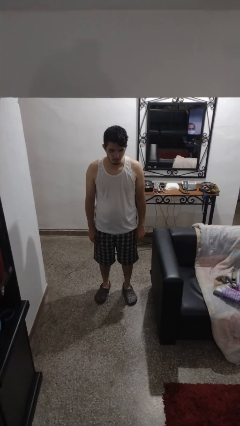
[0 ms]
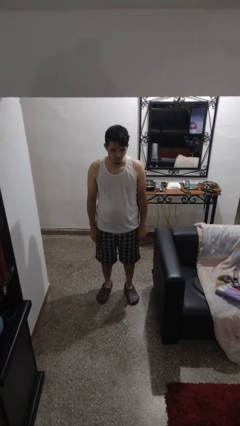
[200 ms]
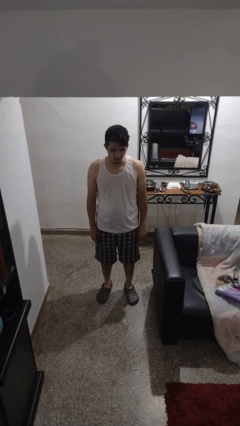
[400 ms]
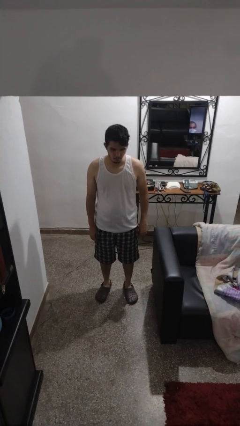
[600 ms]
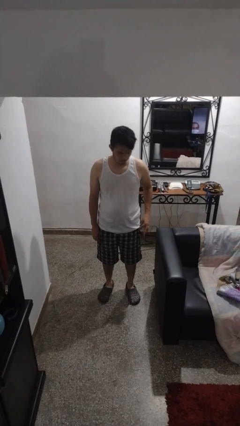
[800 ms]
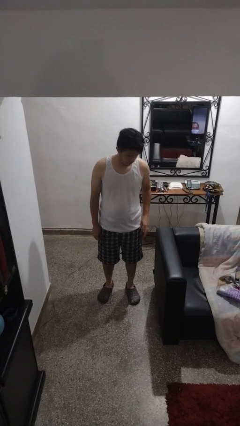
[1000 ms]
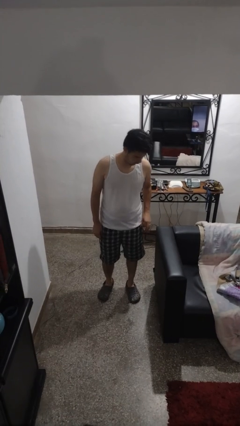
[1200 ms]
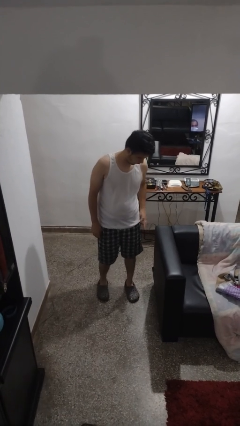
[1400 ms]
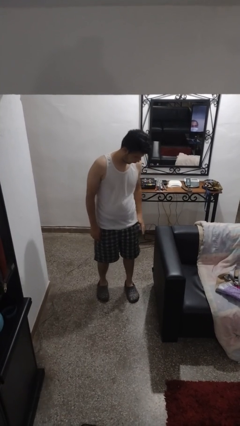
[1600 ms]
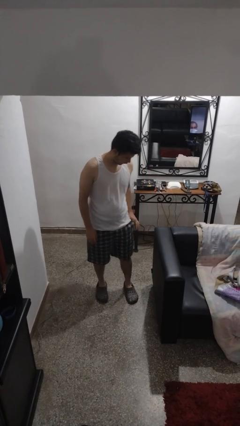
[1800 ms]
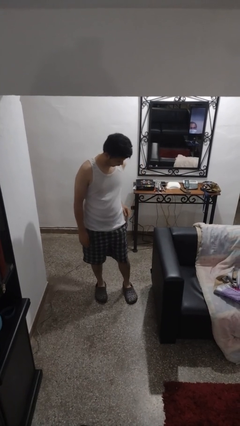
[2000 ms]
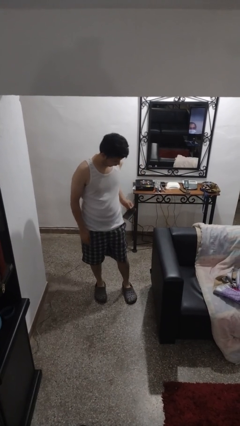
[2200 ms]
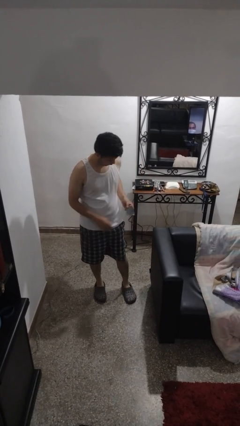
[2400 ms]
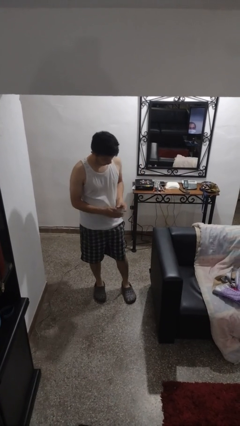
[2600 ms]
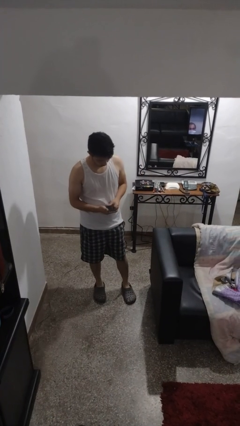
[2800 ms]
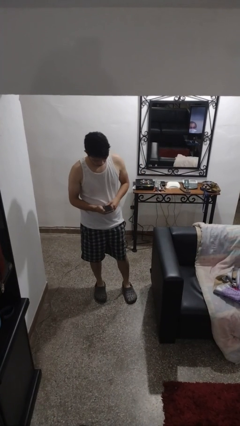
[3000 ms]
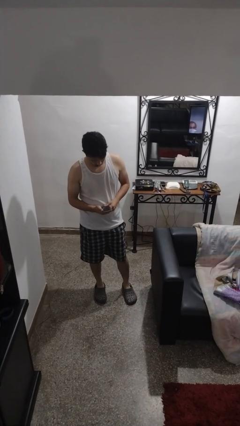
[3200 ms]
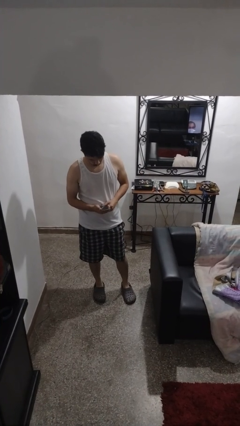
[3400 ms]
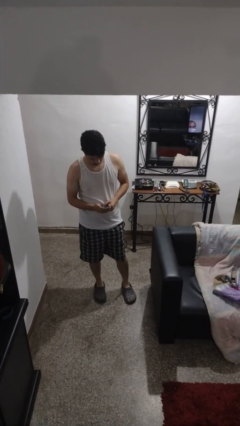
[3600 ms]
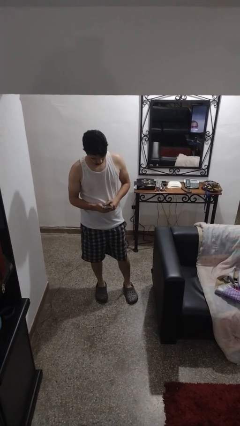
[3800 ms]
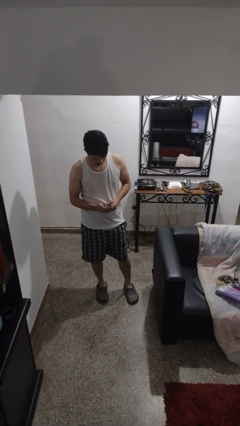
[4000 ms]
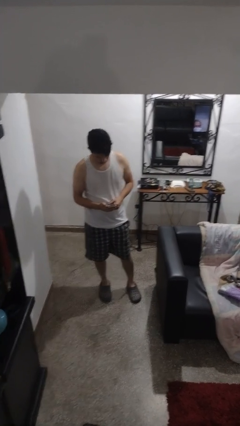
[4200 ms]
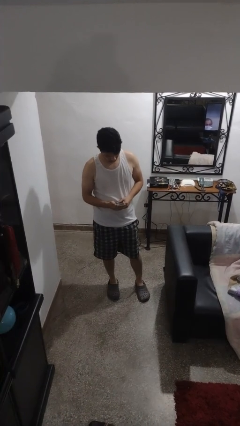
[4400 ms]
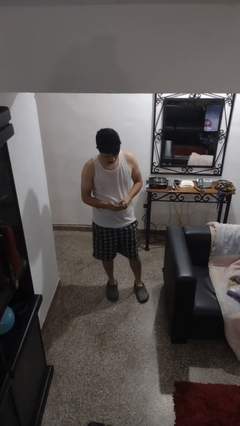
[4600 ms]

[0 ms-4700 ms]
person takes phone from pocket

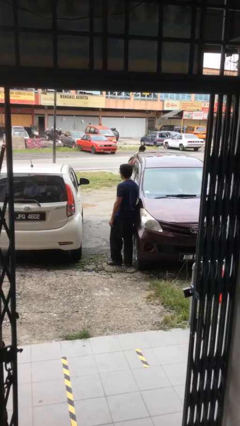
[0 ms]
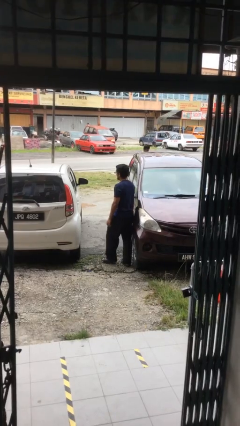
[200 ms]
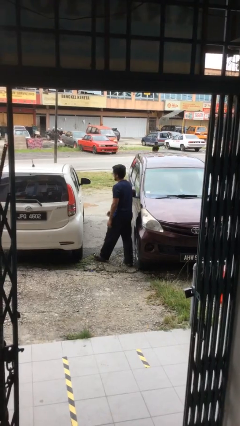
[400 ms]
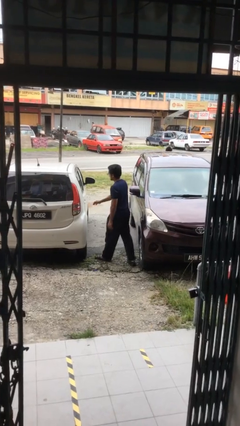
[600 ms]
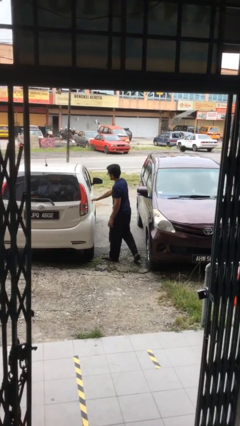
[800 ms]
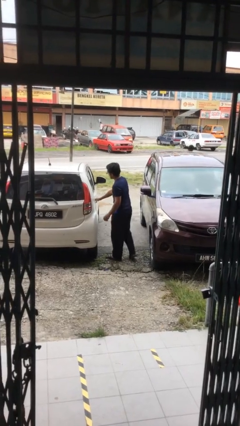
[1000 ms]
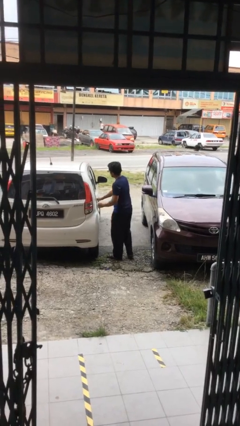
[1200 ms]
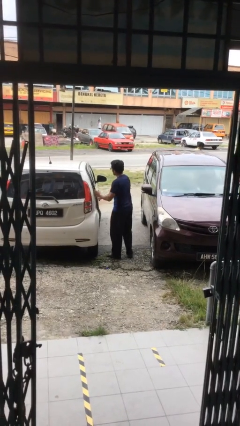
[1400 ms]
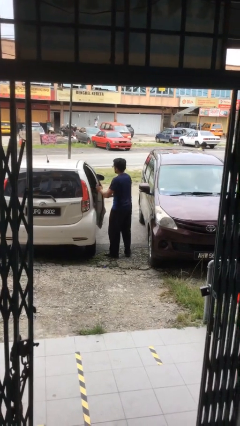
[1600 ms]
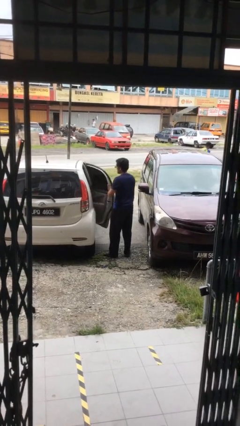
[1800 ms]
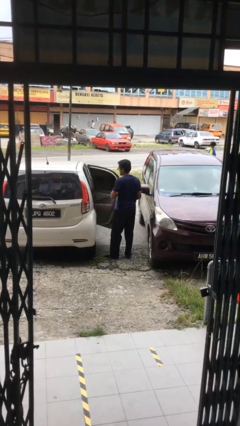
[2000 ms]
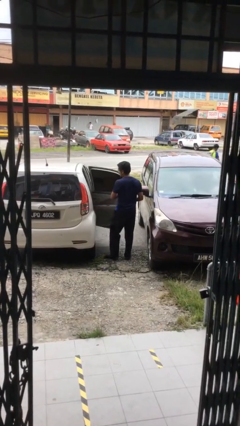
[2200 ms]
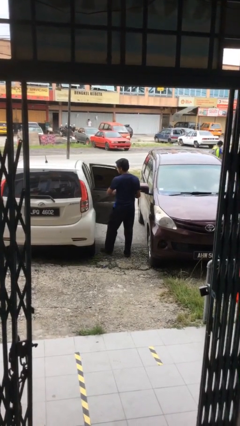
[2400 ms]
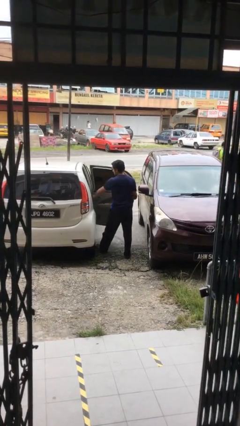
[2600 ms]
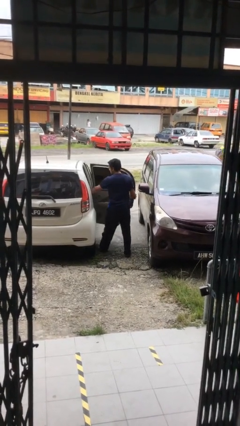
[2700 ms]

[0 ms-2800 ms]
person opens car door

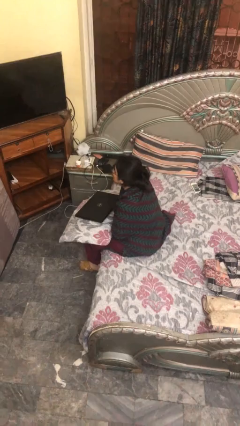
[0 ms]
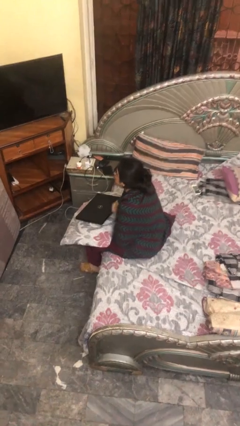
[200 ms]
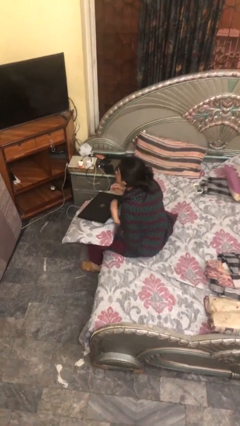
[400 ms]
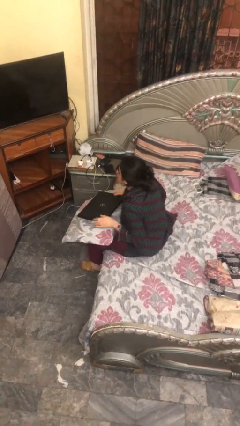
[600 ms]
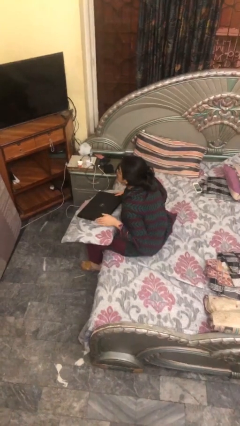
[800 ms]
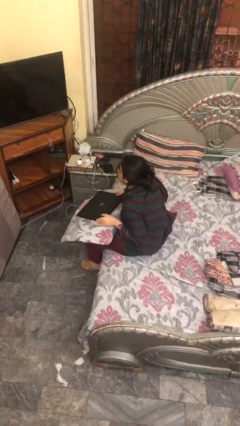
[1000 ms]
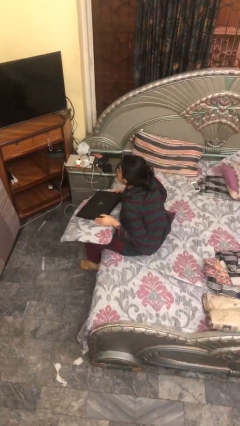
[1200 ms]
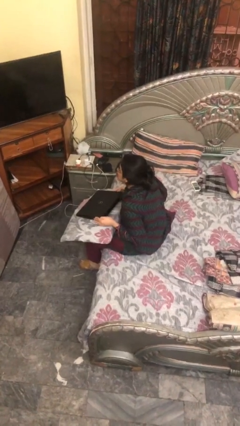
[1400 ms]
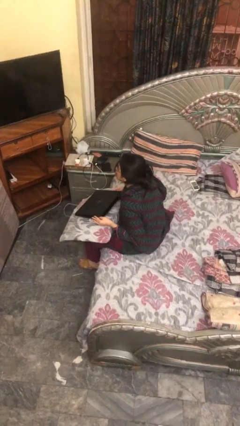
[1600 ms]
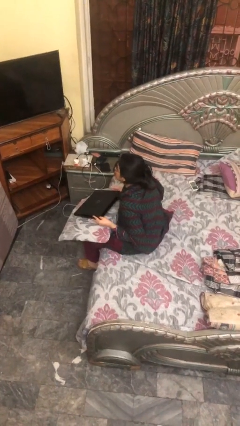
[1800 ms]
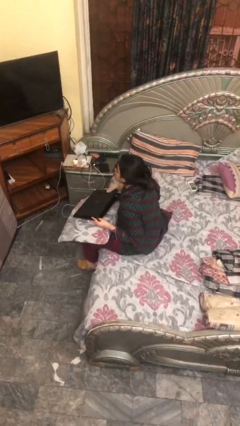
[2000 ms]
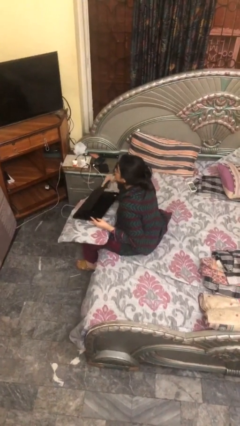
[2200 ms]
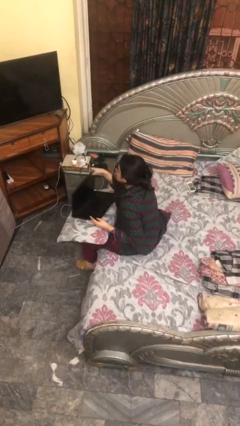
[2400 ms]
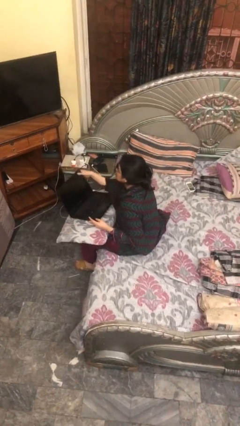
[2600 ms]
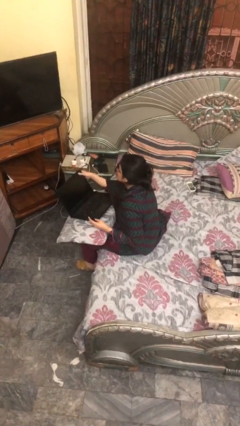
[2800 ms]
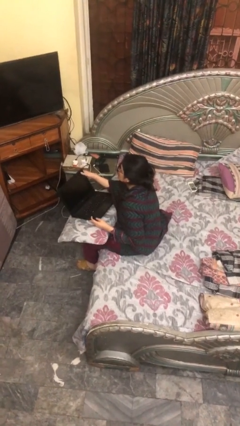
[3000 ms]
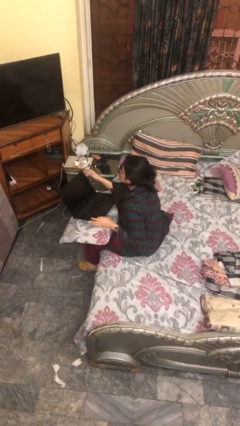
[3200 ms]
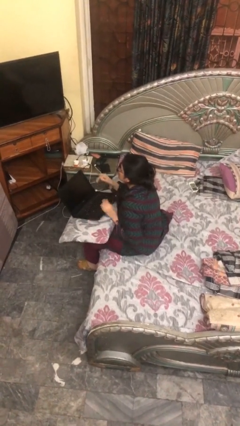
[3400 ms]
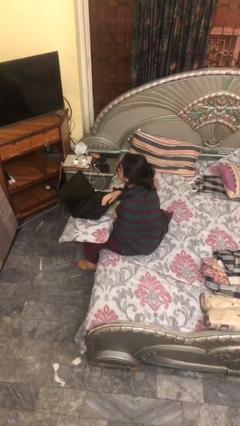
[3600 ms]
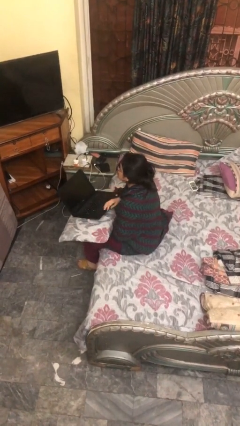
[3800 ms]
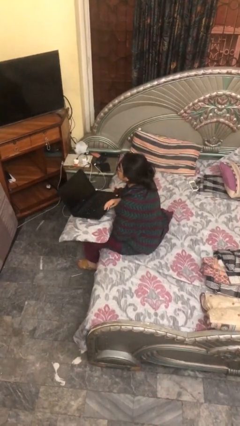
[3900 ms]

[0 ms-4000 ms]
person opens laptop

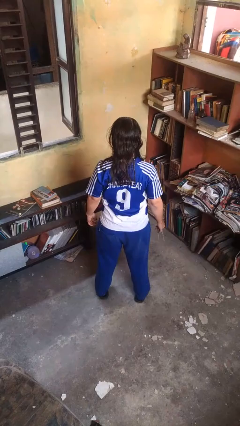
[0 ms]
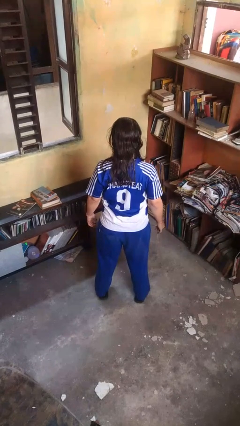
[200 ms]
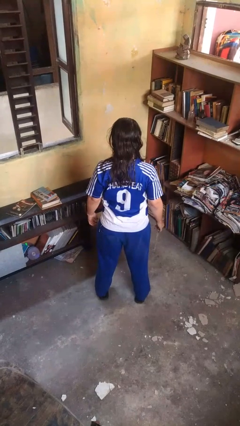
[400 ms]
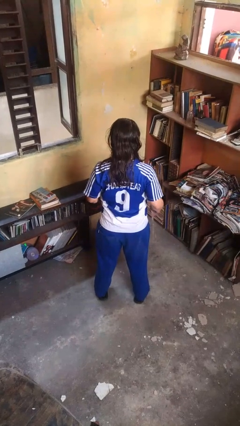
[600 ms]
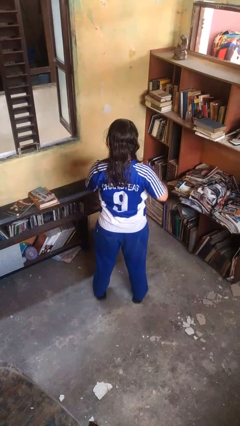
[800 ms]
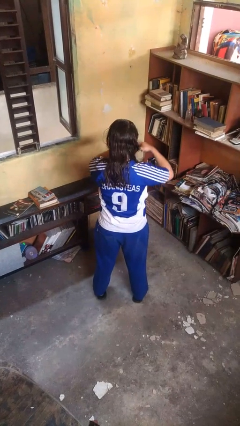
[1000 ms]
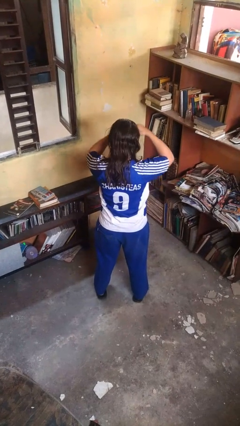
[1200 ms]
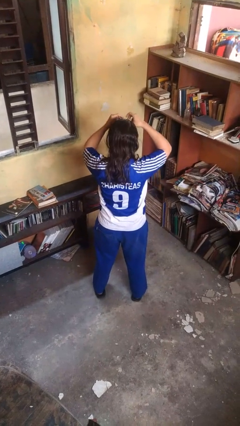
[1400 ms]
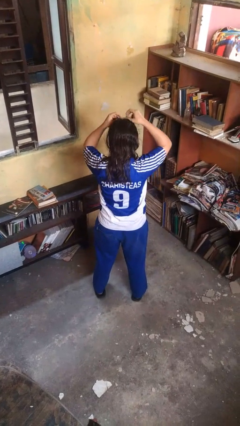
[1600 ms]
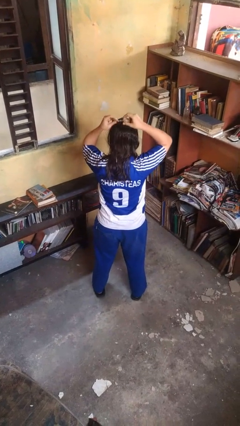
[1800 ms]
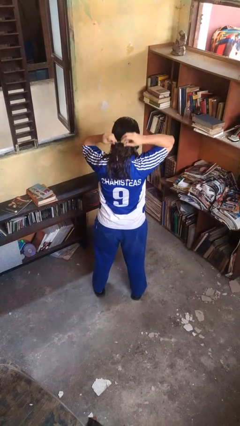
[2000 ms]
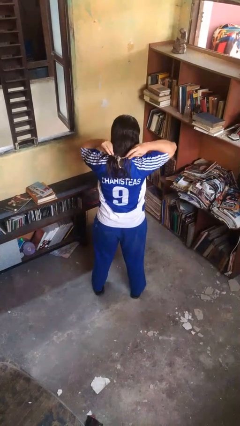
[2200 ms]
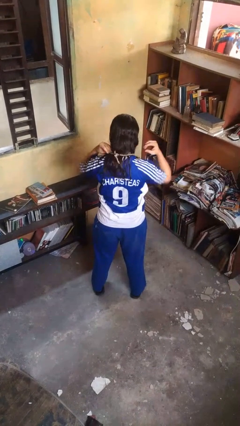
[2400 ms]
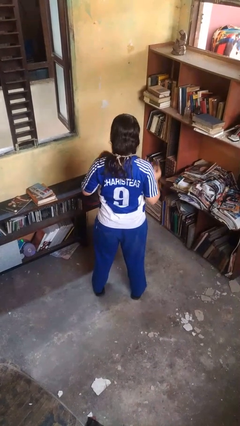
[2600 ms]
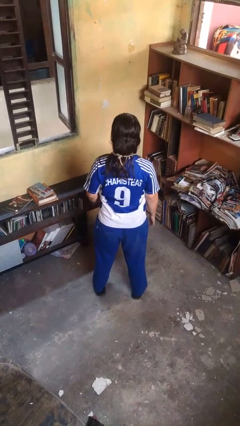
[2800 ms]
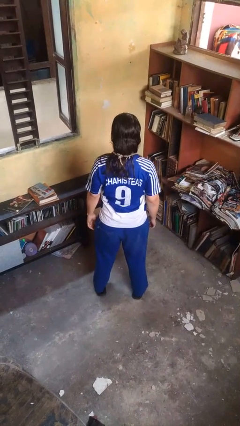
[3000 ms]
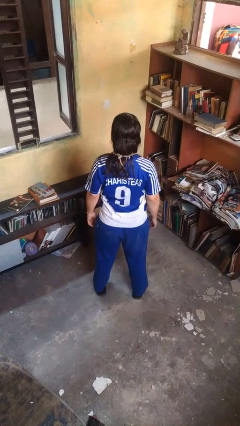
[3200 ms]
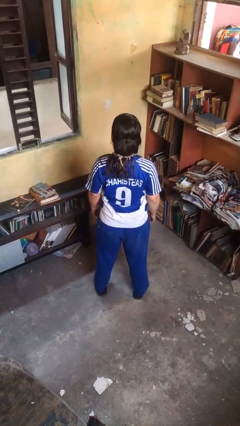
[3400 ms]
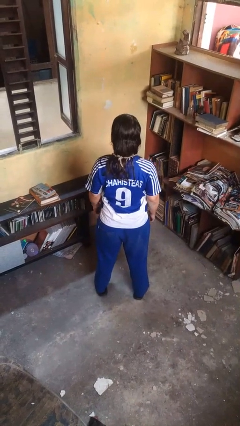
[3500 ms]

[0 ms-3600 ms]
person puts on necklace

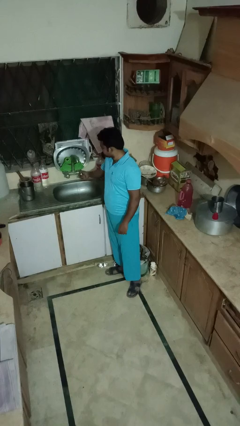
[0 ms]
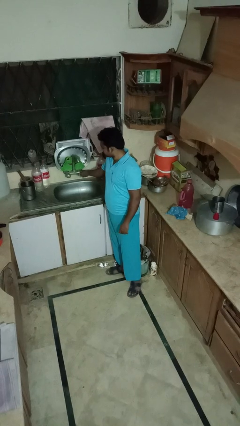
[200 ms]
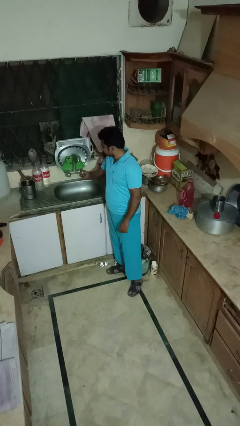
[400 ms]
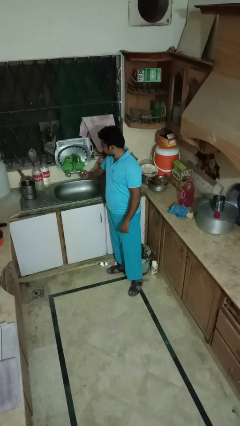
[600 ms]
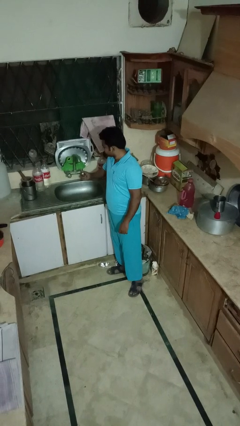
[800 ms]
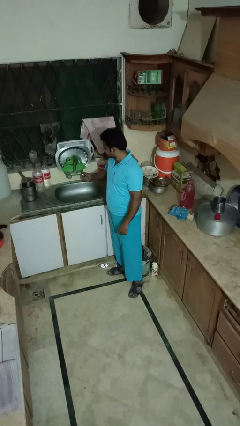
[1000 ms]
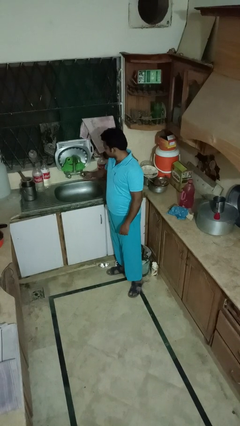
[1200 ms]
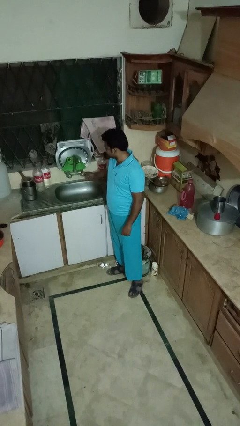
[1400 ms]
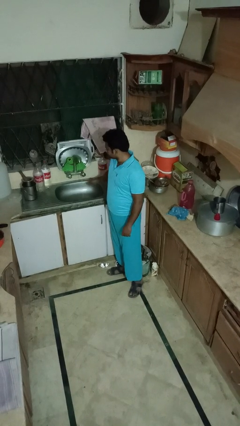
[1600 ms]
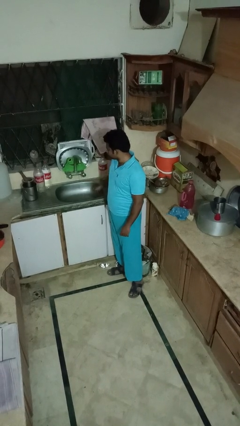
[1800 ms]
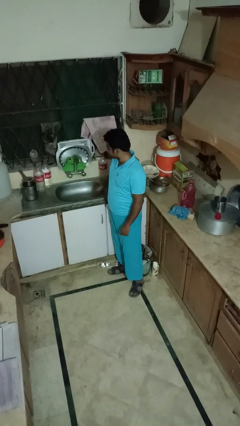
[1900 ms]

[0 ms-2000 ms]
person turns off faucet

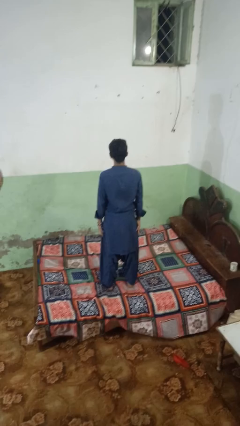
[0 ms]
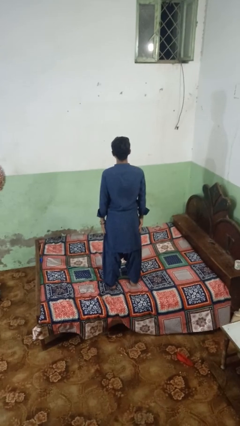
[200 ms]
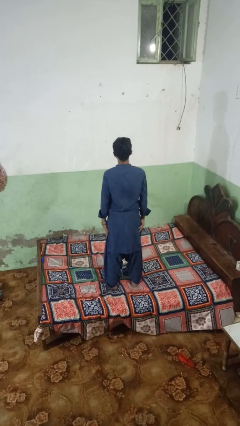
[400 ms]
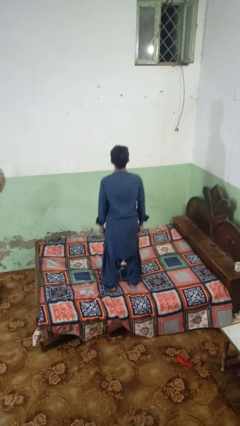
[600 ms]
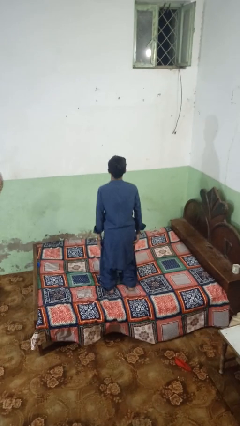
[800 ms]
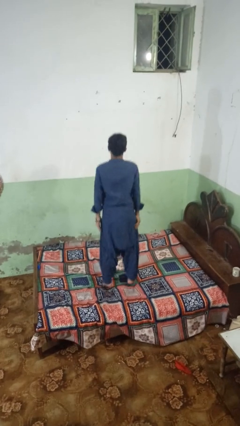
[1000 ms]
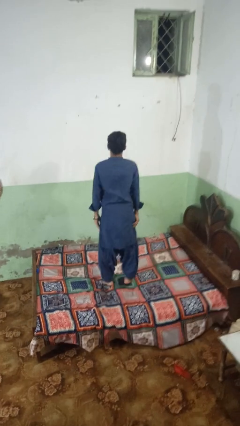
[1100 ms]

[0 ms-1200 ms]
person jumps on bed
